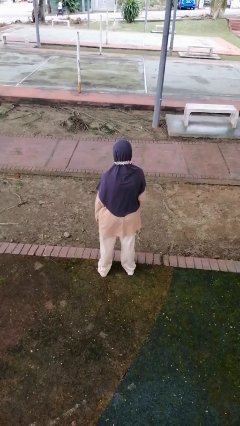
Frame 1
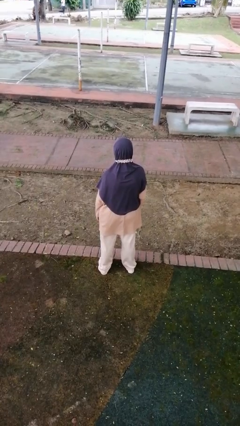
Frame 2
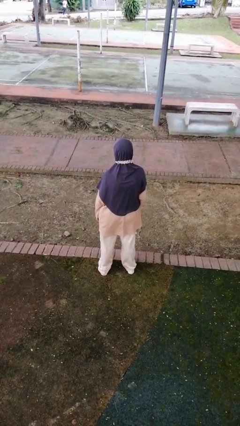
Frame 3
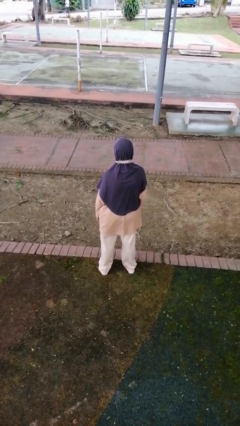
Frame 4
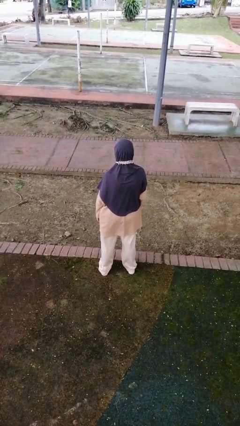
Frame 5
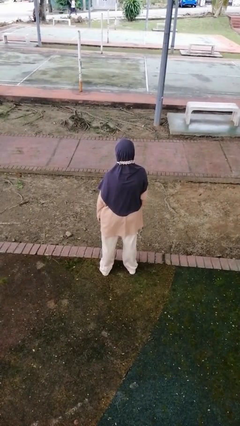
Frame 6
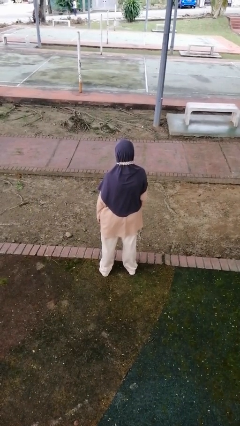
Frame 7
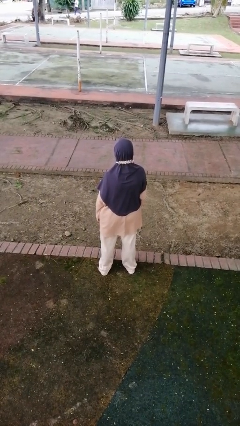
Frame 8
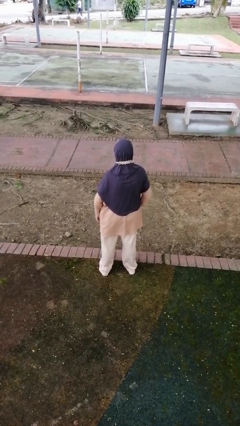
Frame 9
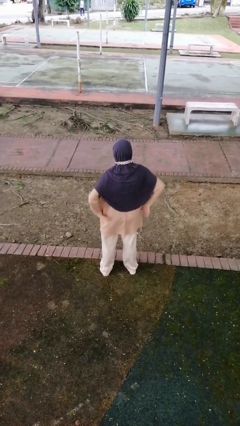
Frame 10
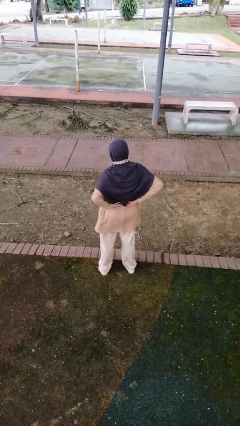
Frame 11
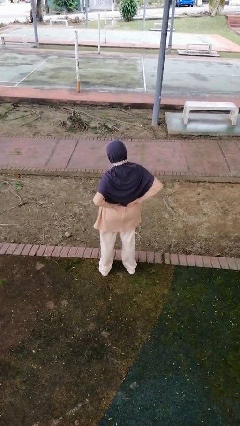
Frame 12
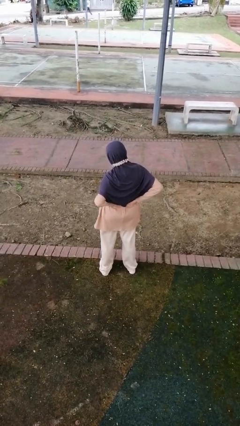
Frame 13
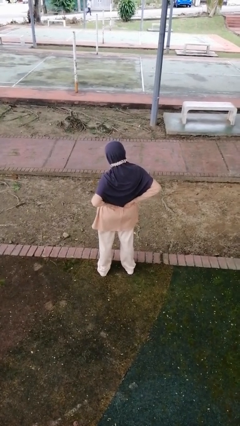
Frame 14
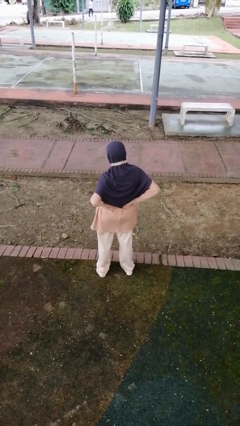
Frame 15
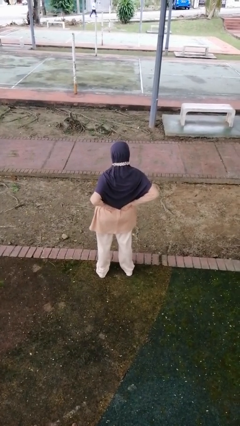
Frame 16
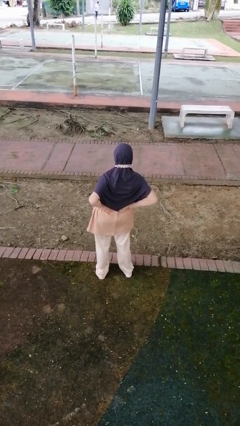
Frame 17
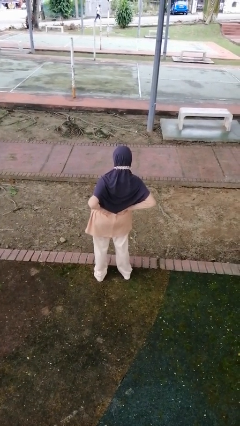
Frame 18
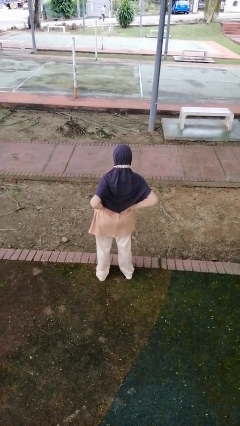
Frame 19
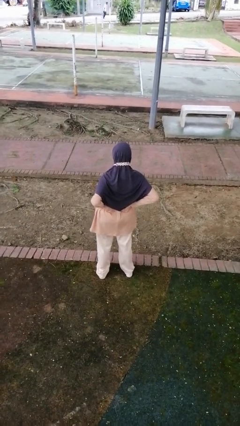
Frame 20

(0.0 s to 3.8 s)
person stretches back

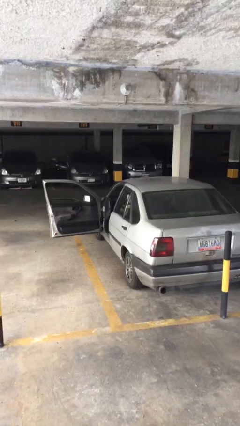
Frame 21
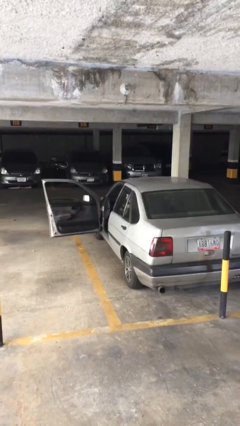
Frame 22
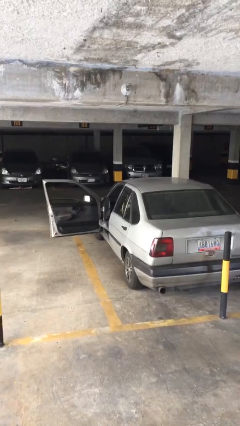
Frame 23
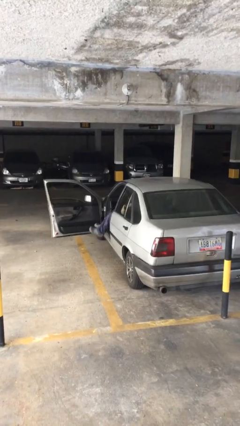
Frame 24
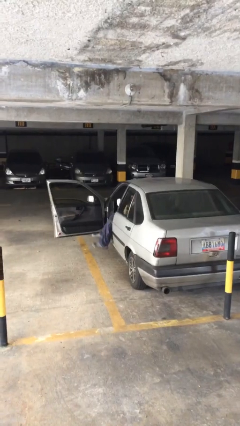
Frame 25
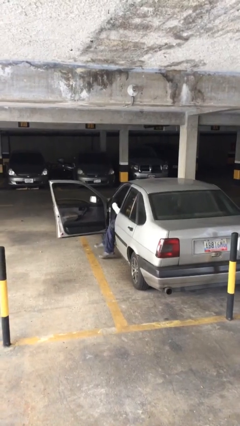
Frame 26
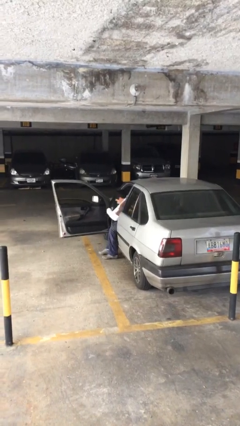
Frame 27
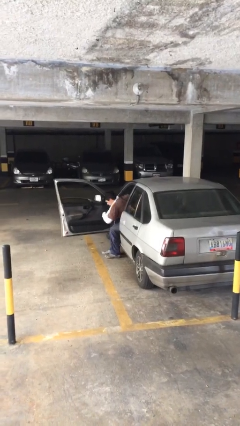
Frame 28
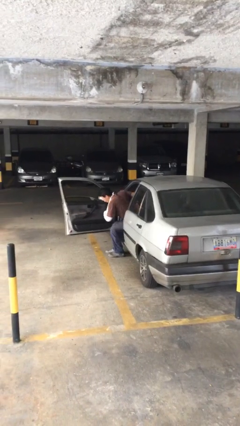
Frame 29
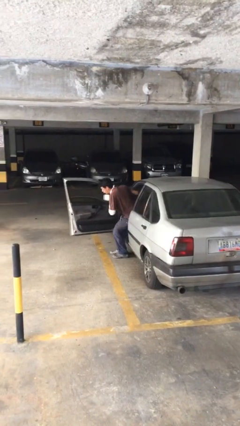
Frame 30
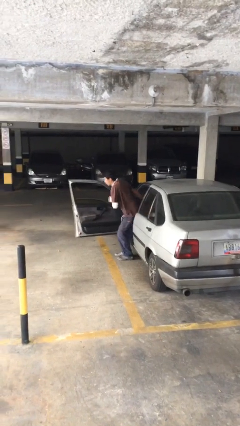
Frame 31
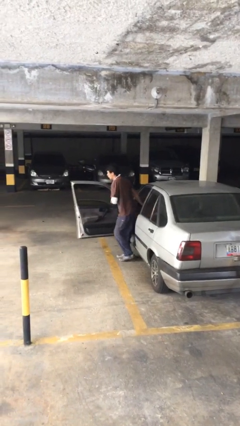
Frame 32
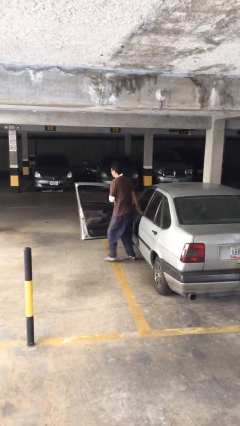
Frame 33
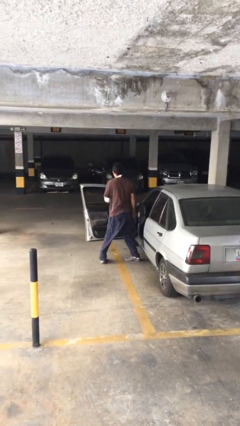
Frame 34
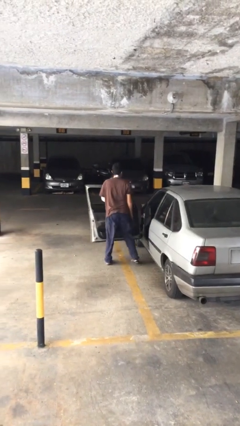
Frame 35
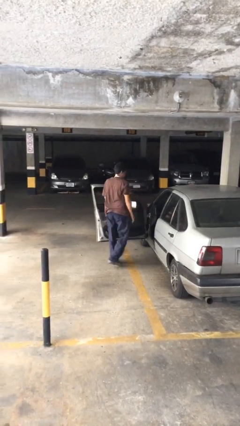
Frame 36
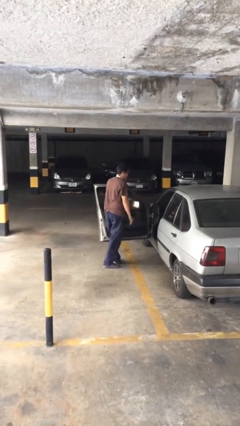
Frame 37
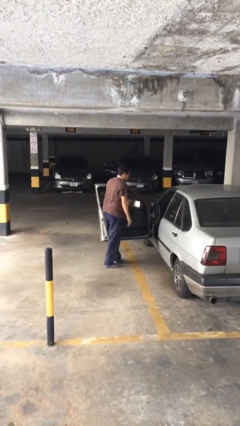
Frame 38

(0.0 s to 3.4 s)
person exits car

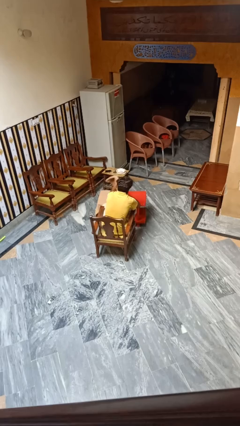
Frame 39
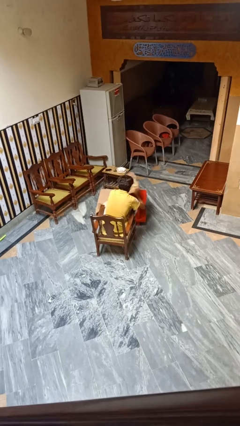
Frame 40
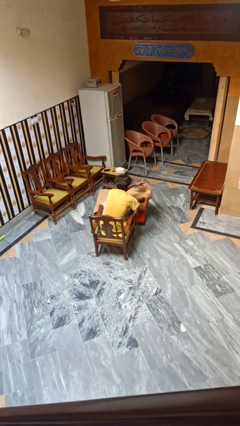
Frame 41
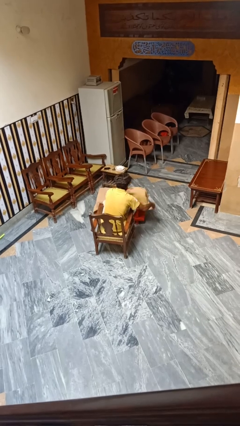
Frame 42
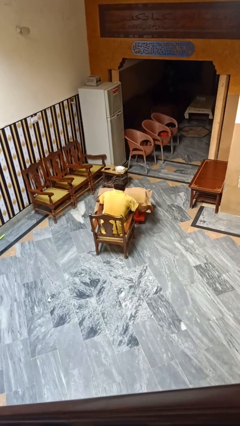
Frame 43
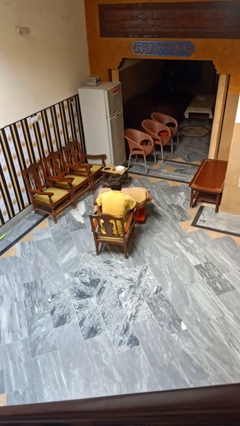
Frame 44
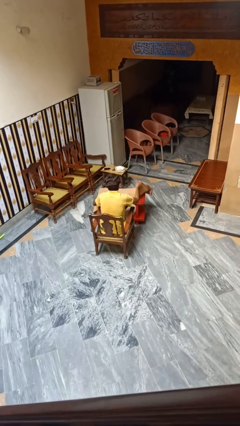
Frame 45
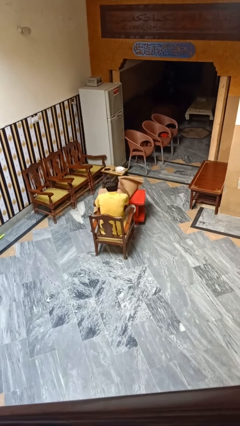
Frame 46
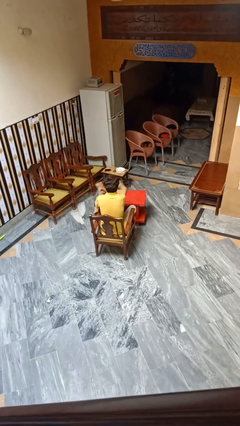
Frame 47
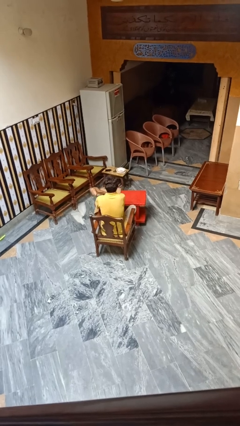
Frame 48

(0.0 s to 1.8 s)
person folds tablecloth

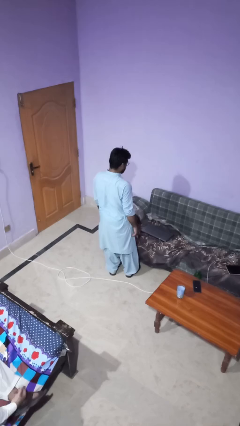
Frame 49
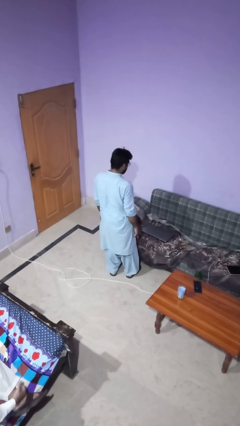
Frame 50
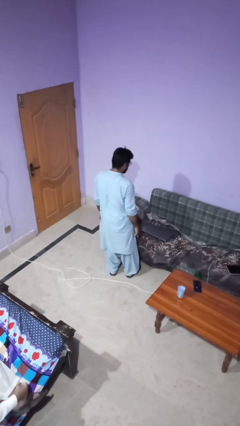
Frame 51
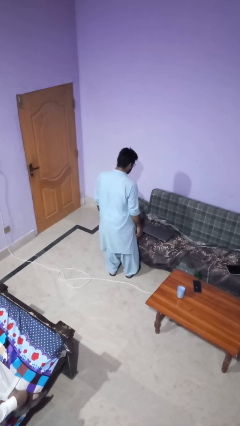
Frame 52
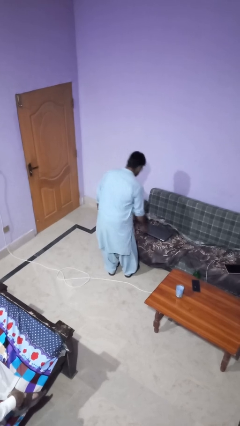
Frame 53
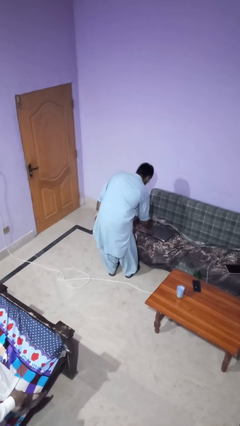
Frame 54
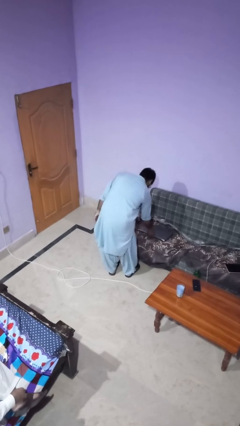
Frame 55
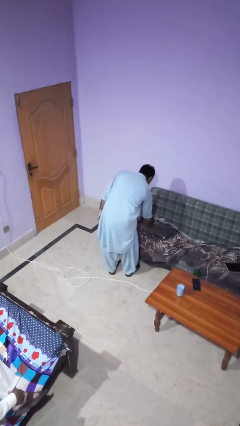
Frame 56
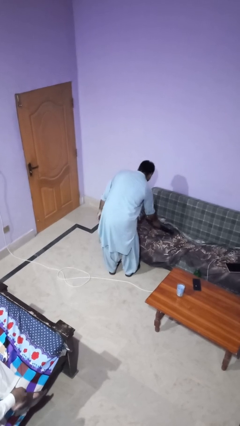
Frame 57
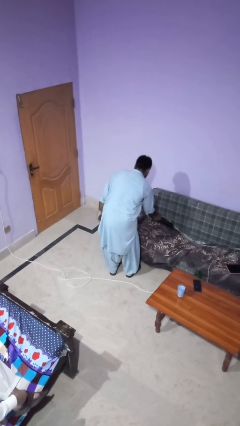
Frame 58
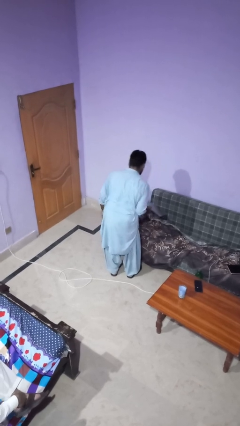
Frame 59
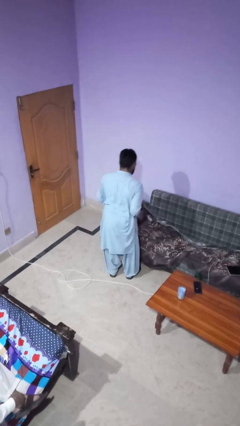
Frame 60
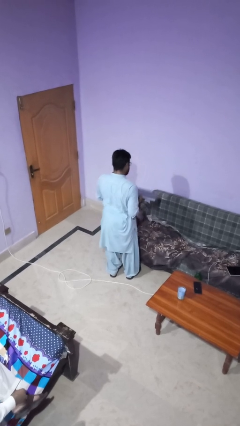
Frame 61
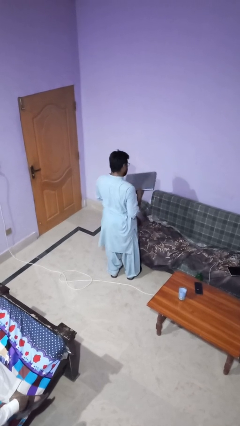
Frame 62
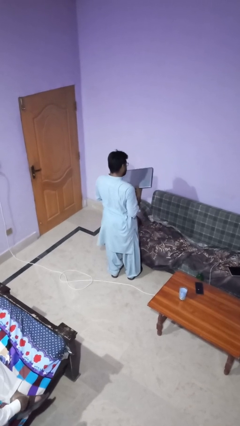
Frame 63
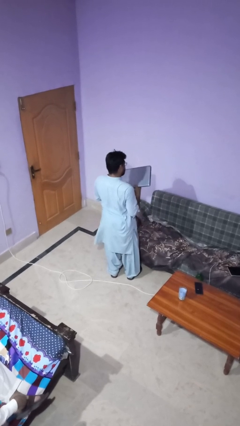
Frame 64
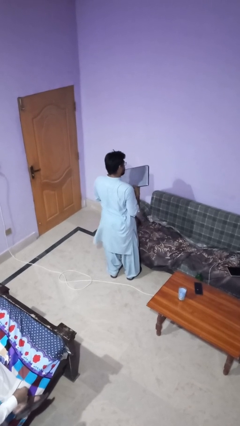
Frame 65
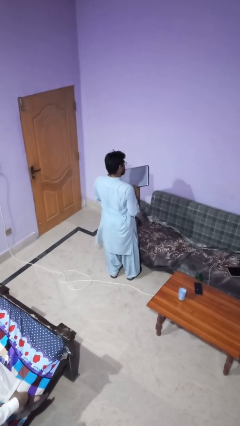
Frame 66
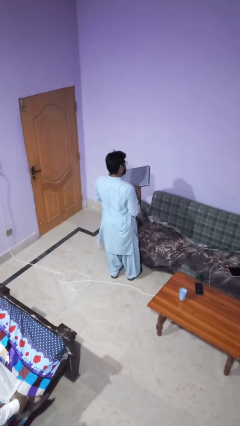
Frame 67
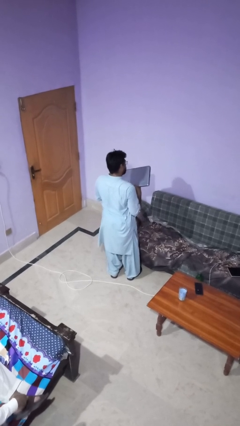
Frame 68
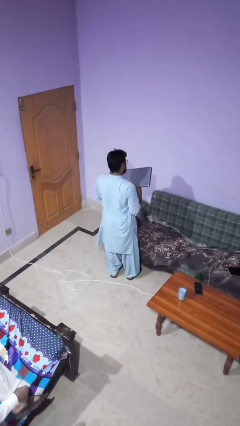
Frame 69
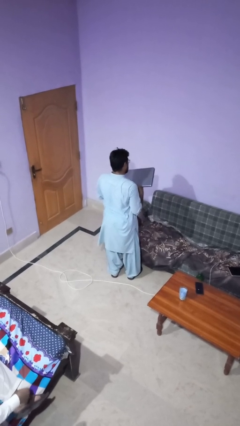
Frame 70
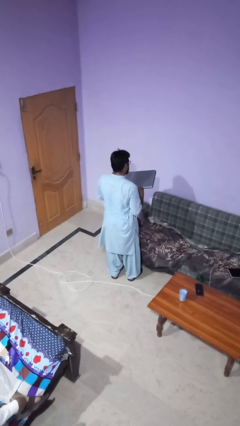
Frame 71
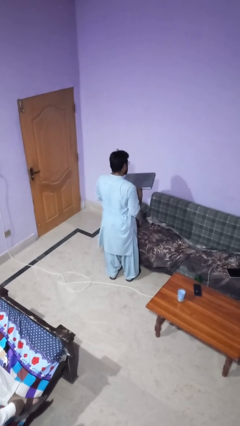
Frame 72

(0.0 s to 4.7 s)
person picks up object from couch

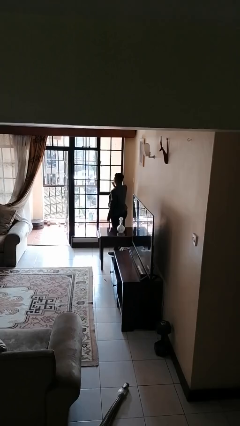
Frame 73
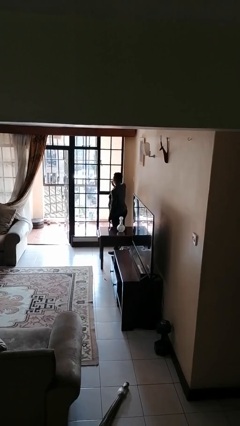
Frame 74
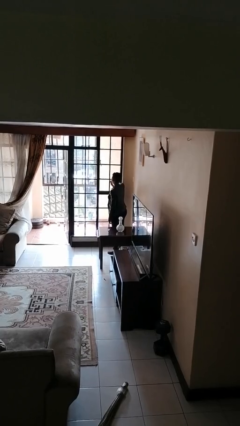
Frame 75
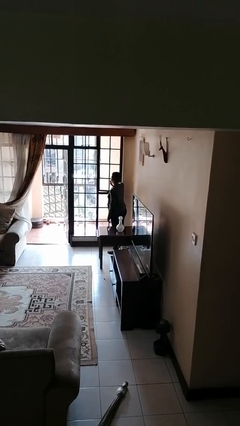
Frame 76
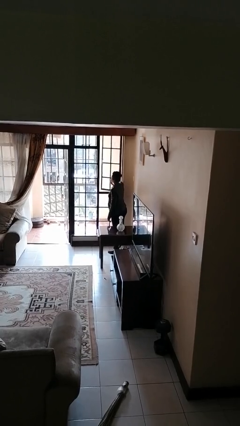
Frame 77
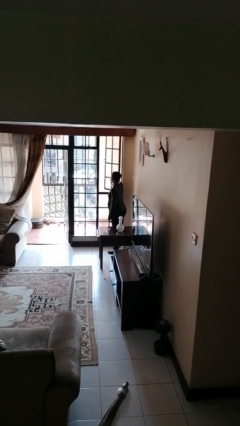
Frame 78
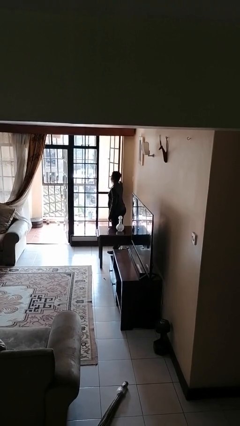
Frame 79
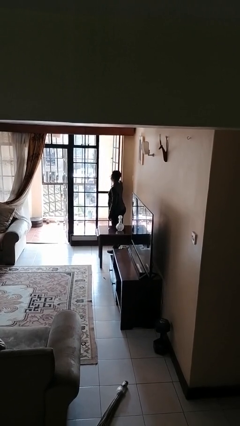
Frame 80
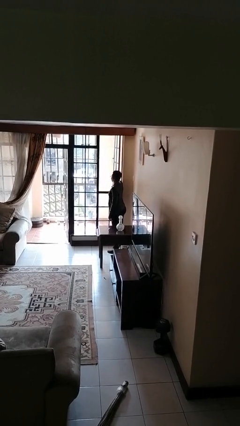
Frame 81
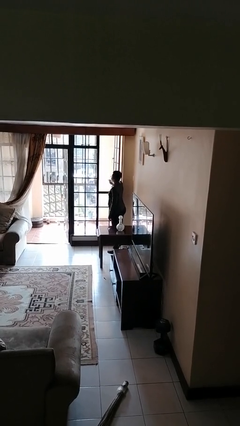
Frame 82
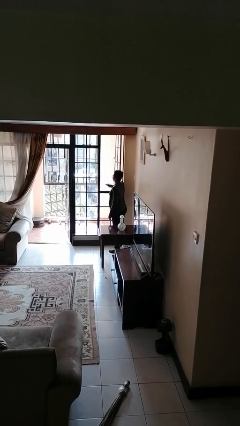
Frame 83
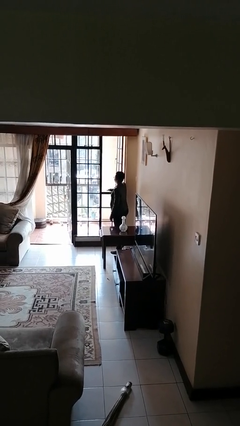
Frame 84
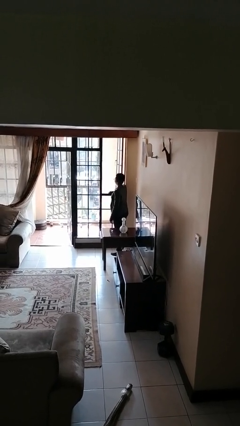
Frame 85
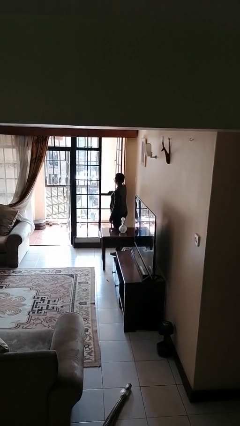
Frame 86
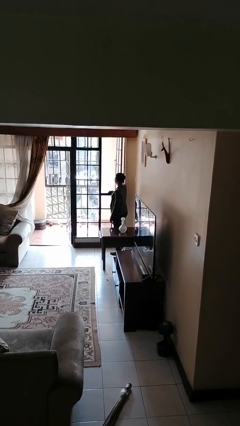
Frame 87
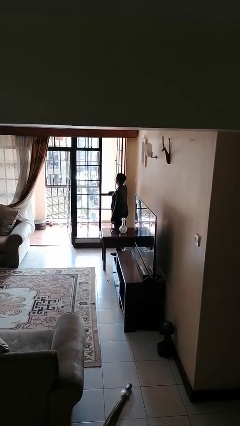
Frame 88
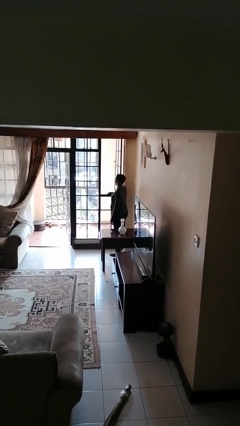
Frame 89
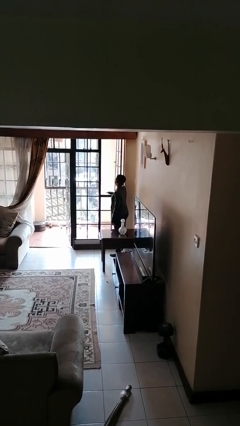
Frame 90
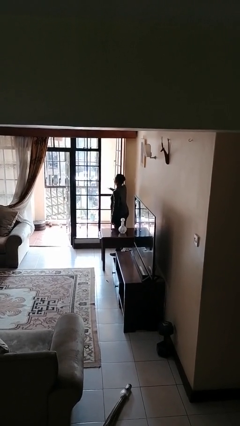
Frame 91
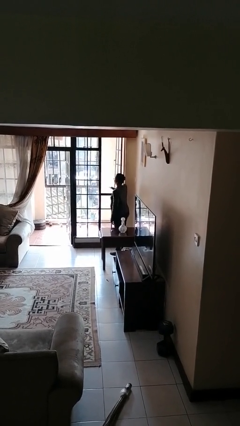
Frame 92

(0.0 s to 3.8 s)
person opens home window

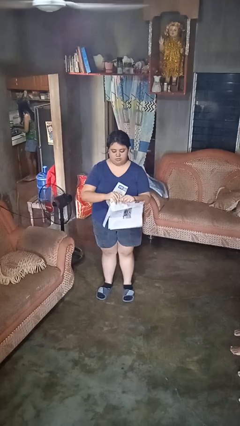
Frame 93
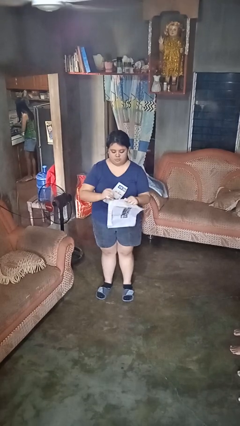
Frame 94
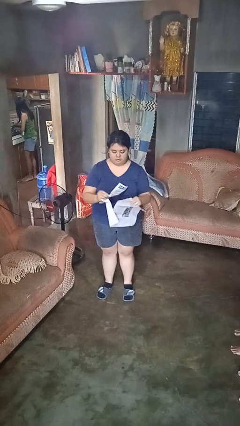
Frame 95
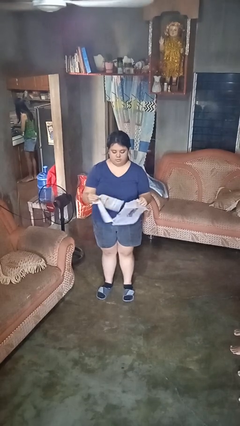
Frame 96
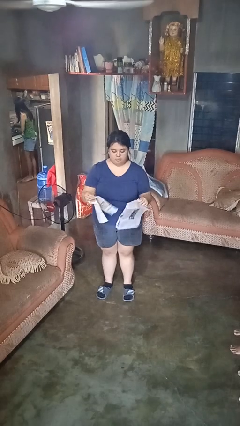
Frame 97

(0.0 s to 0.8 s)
person tears paper
